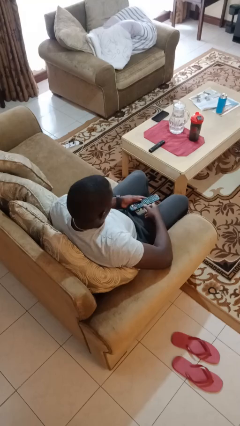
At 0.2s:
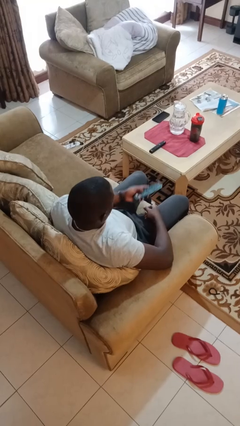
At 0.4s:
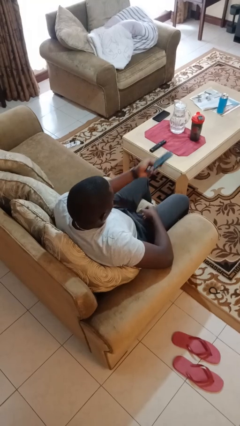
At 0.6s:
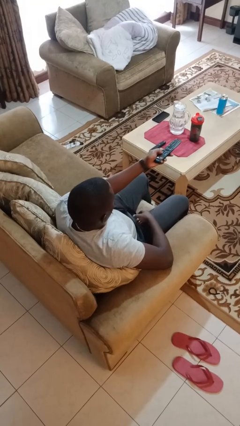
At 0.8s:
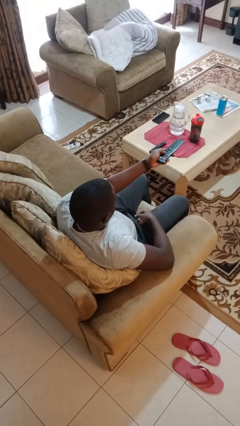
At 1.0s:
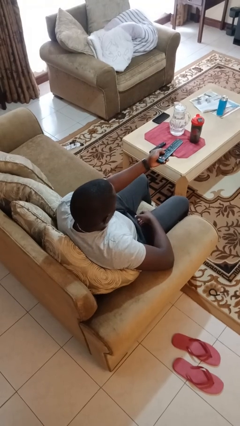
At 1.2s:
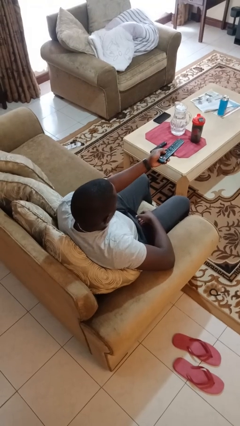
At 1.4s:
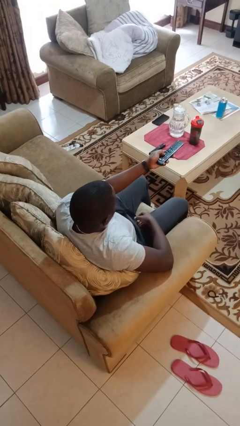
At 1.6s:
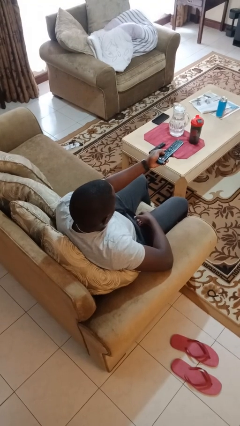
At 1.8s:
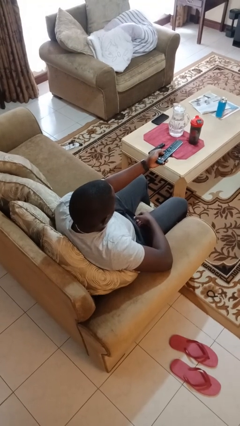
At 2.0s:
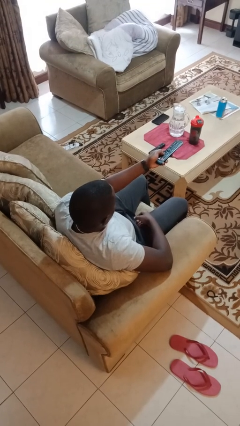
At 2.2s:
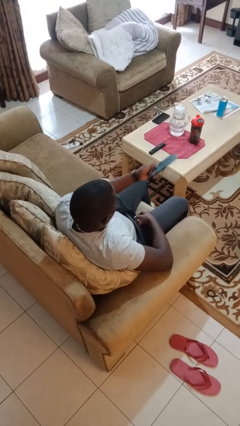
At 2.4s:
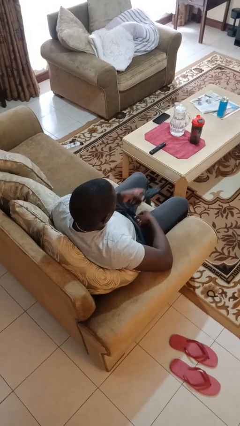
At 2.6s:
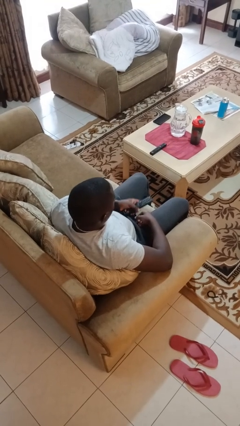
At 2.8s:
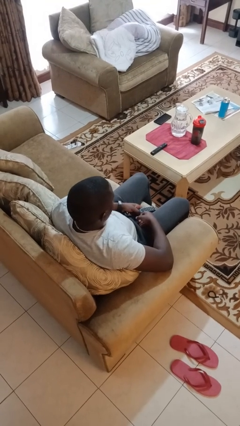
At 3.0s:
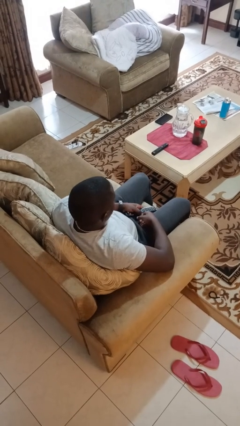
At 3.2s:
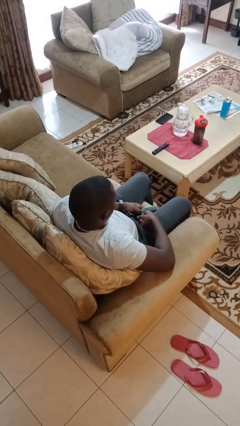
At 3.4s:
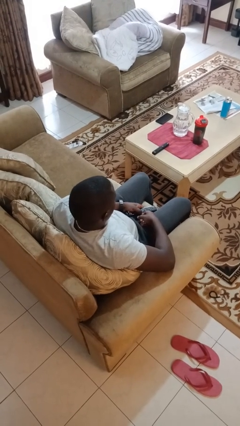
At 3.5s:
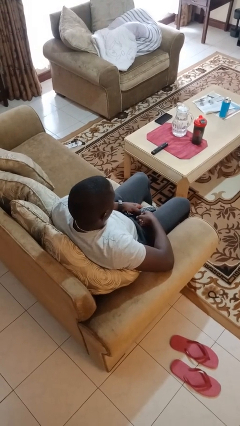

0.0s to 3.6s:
person uses television remote

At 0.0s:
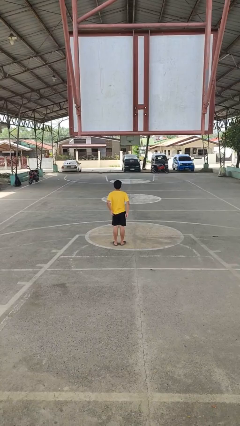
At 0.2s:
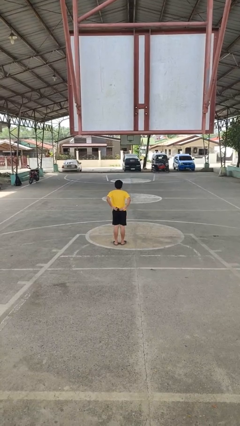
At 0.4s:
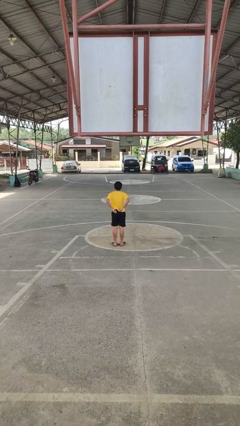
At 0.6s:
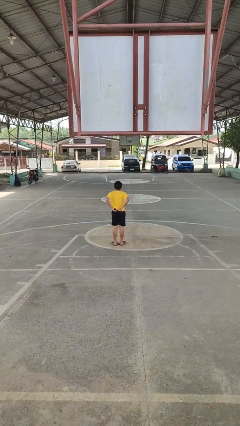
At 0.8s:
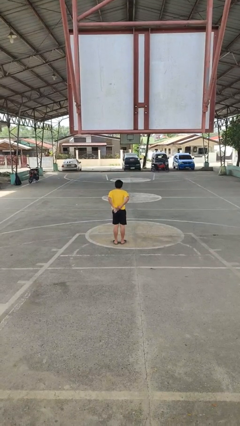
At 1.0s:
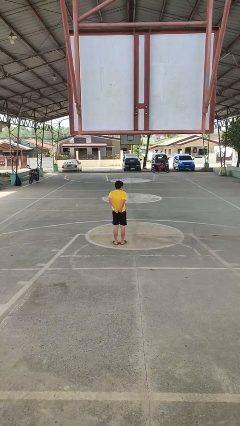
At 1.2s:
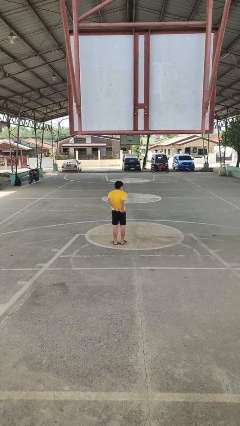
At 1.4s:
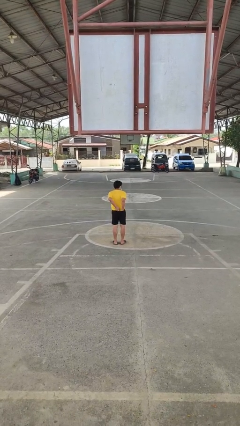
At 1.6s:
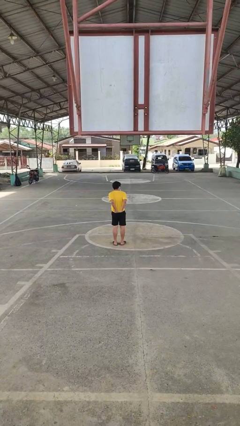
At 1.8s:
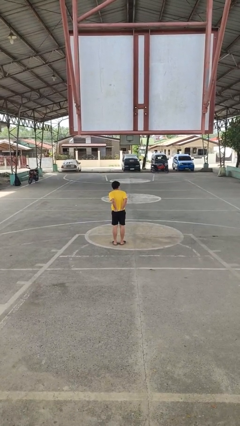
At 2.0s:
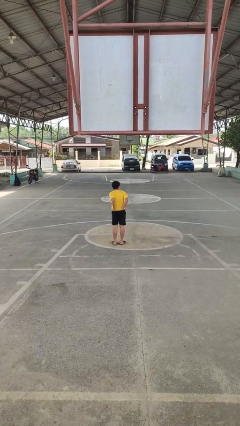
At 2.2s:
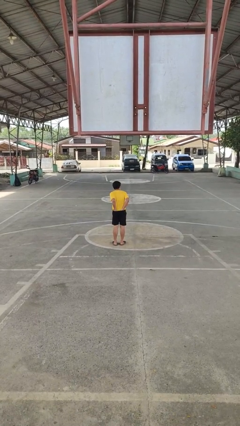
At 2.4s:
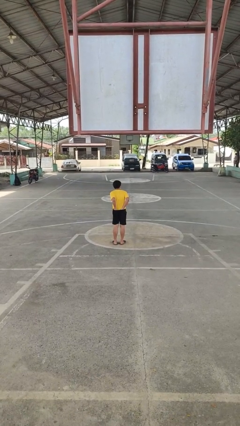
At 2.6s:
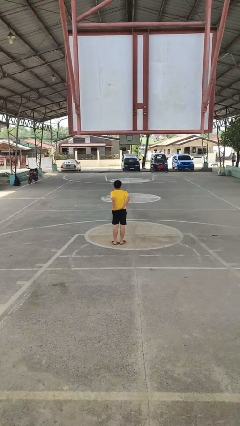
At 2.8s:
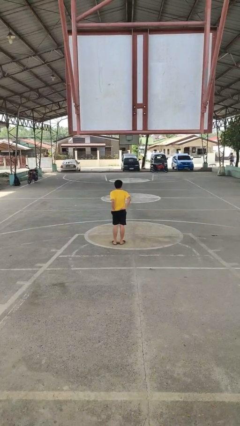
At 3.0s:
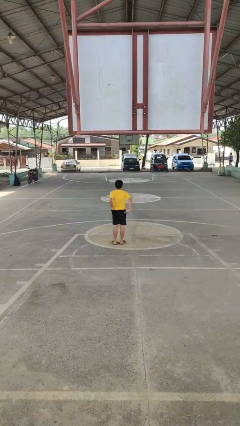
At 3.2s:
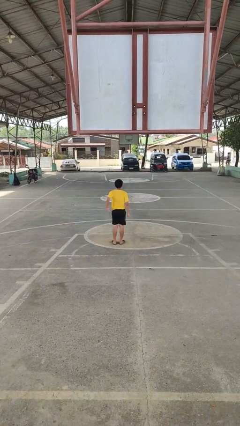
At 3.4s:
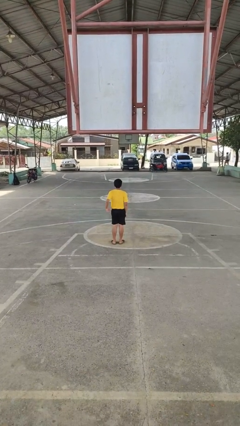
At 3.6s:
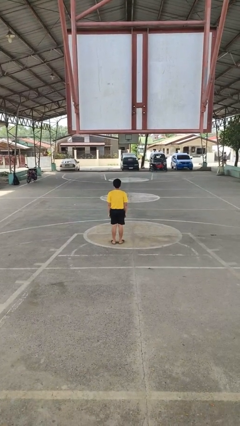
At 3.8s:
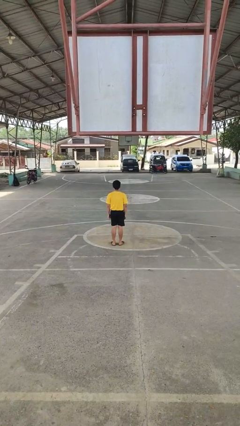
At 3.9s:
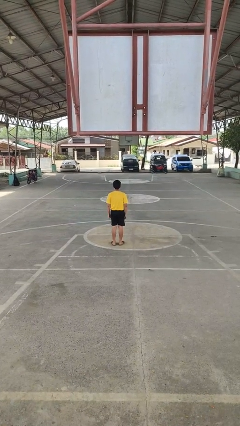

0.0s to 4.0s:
person tucks in shirt

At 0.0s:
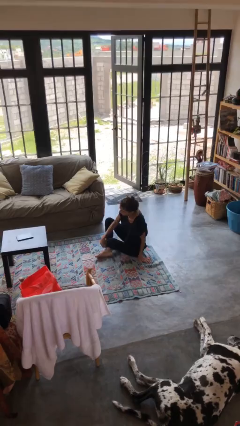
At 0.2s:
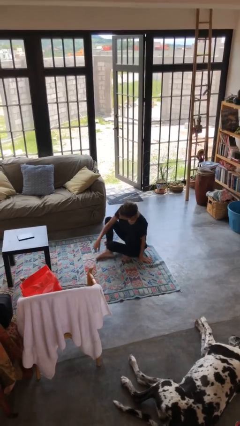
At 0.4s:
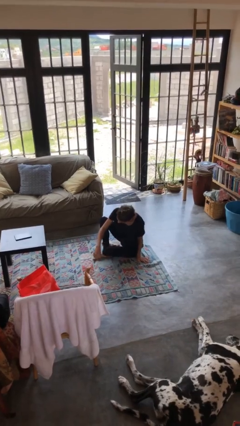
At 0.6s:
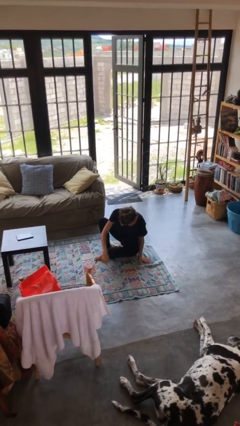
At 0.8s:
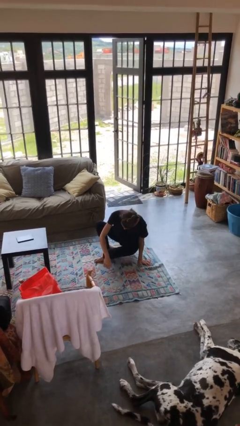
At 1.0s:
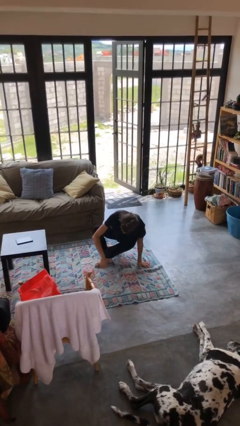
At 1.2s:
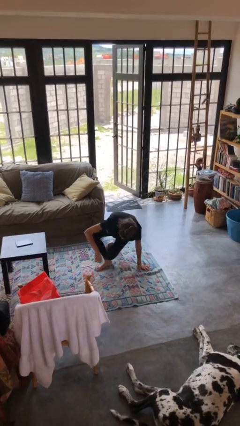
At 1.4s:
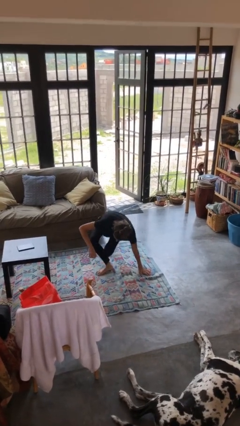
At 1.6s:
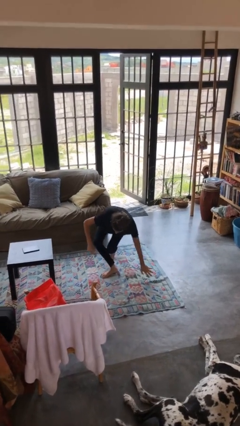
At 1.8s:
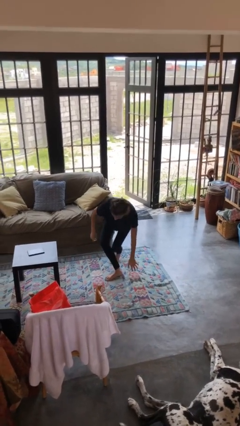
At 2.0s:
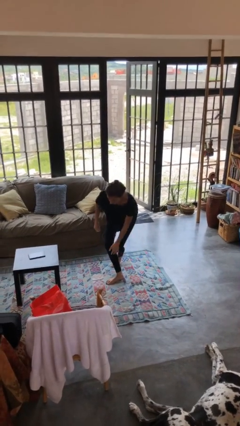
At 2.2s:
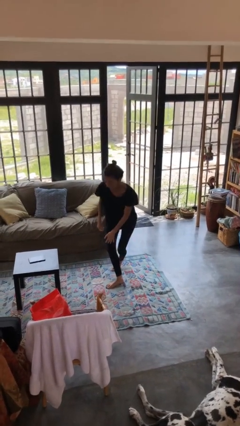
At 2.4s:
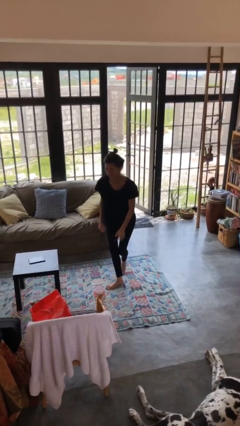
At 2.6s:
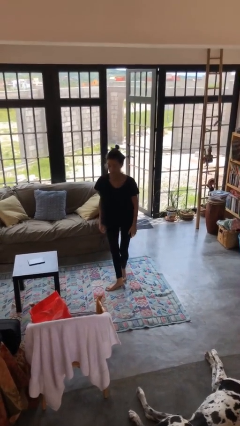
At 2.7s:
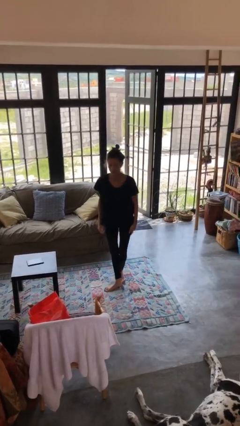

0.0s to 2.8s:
person stands up from floor

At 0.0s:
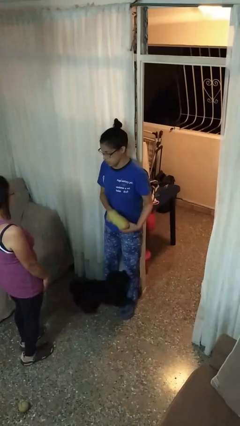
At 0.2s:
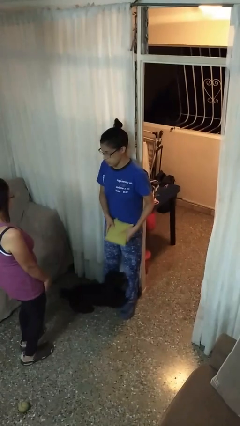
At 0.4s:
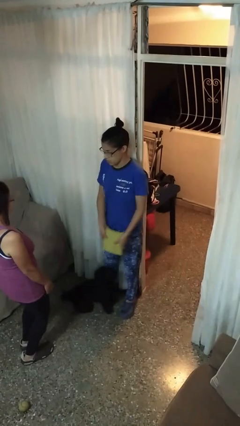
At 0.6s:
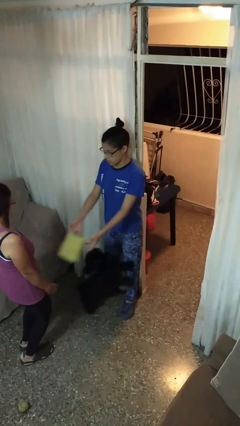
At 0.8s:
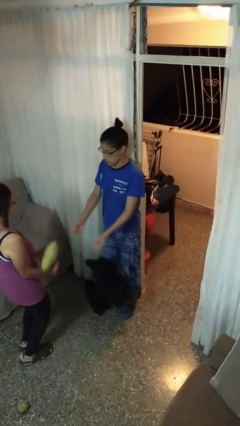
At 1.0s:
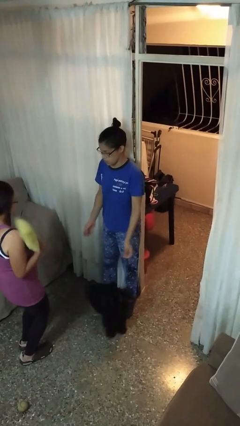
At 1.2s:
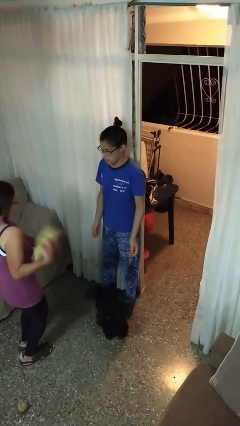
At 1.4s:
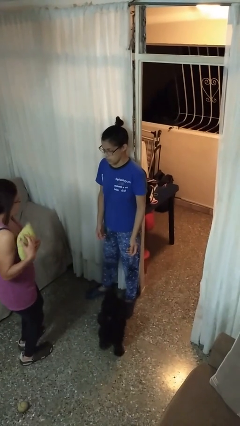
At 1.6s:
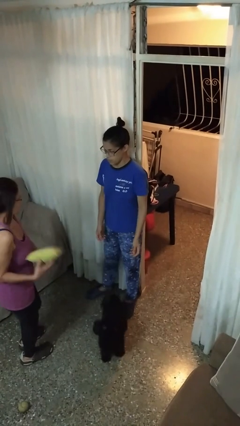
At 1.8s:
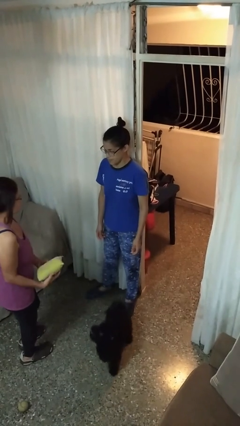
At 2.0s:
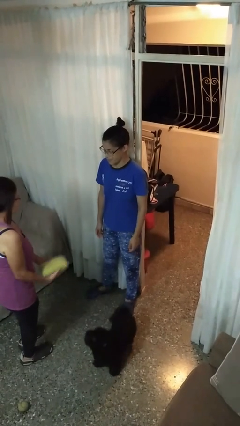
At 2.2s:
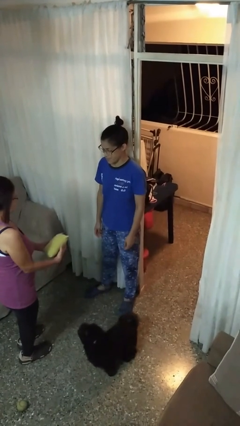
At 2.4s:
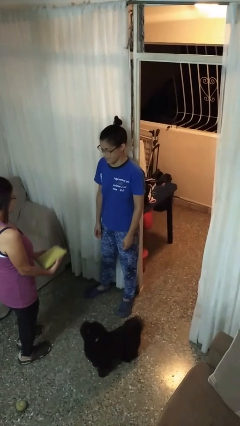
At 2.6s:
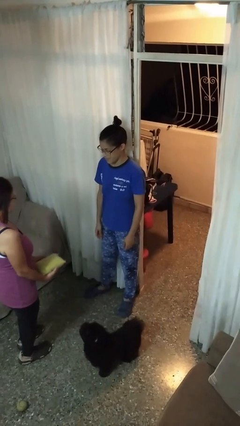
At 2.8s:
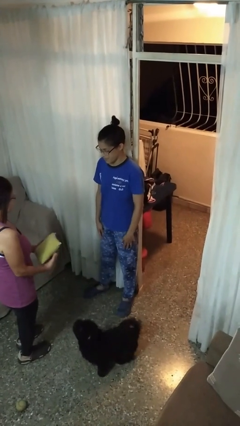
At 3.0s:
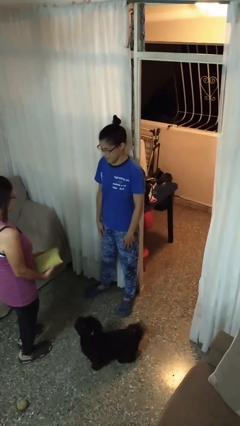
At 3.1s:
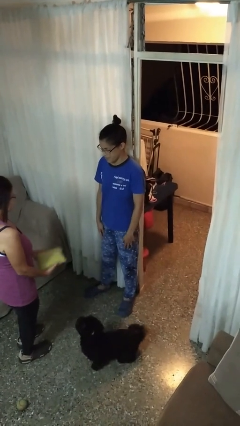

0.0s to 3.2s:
person throws object to person

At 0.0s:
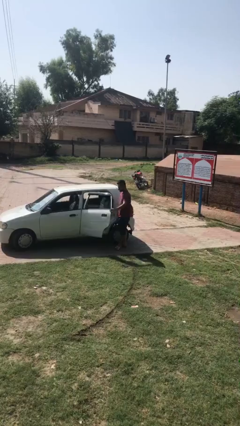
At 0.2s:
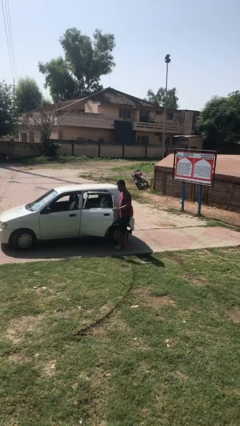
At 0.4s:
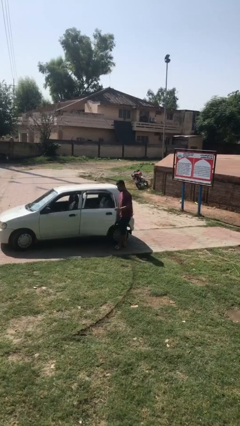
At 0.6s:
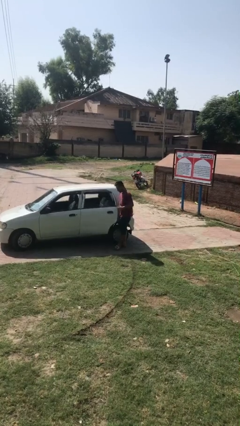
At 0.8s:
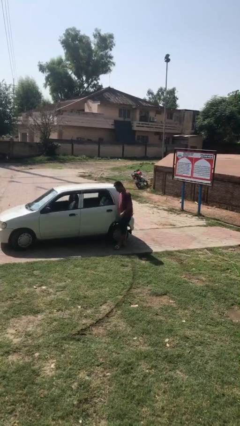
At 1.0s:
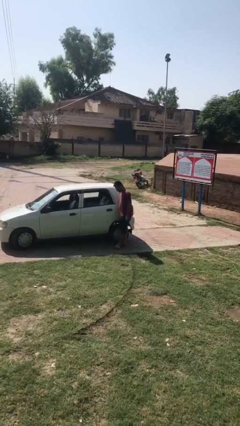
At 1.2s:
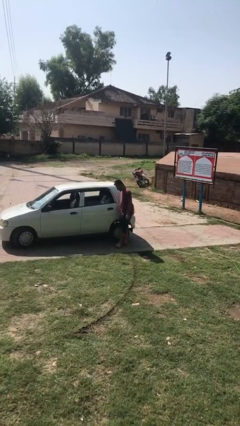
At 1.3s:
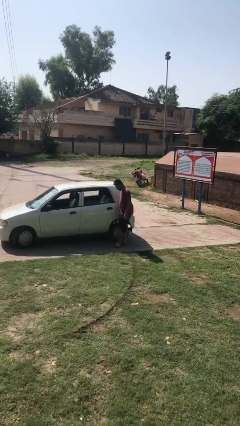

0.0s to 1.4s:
person closes car door

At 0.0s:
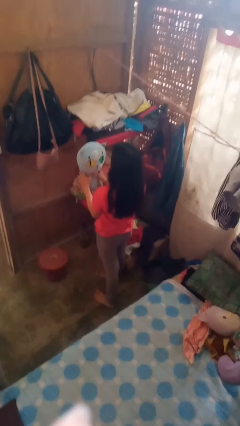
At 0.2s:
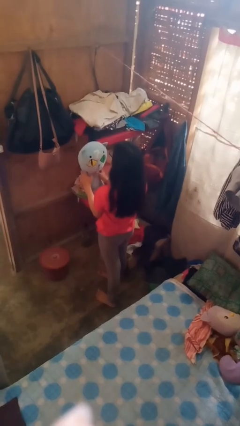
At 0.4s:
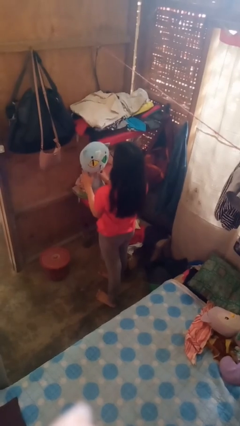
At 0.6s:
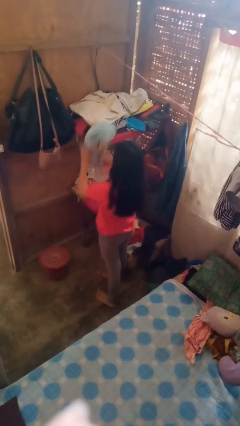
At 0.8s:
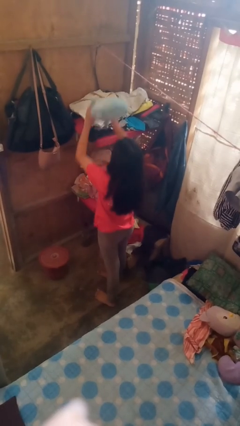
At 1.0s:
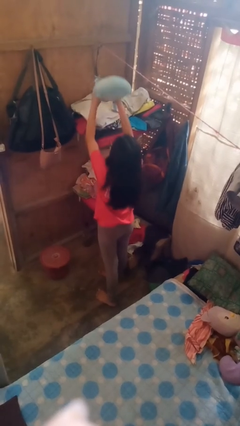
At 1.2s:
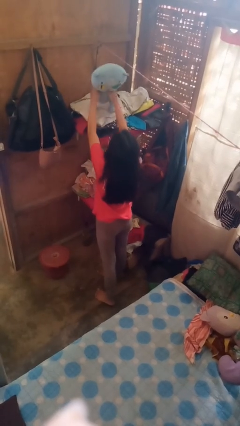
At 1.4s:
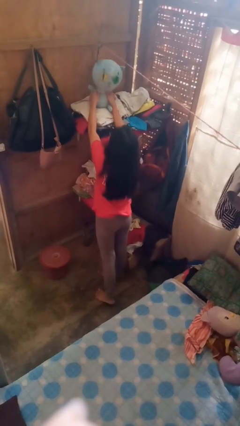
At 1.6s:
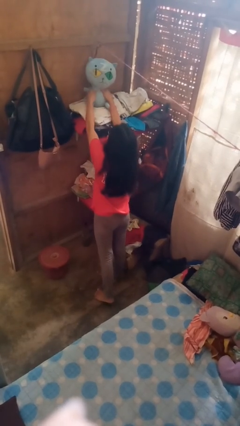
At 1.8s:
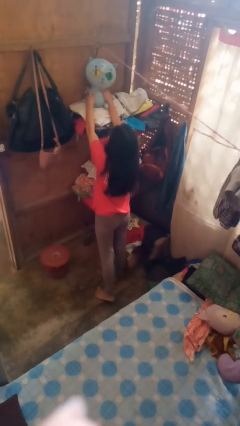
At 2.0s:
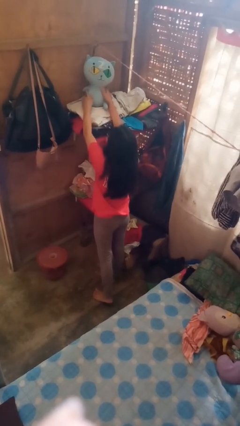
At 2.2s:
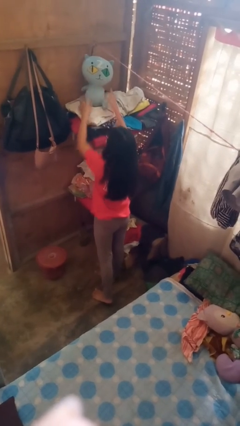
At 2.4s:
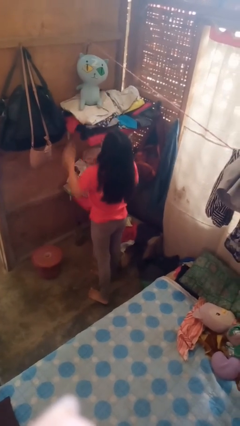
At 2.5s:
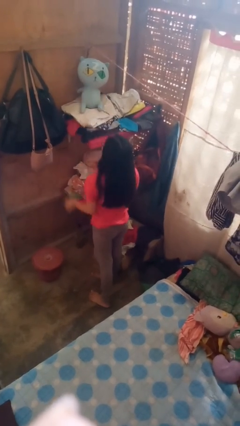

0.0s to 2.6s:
person puts down object on shelf
